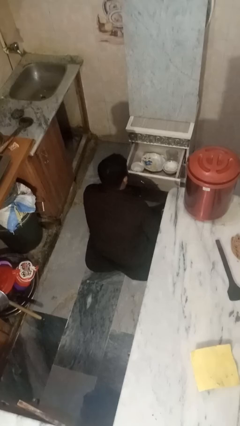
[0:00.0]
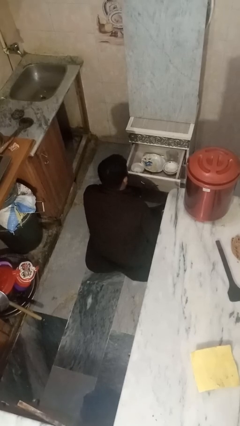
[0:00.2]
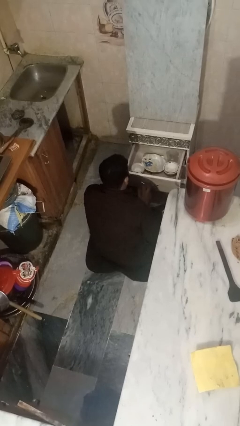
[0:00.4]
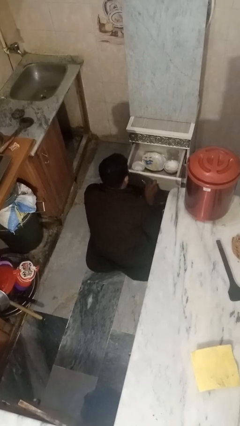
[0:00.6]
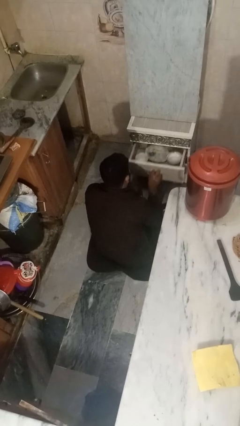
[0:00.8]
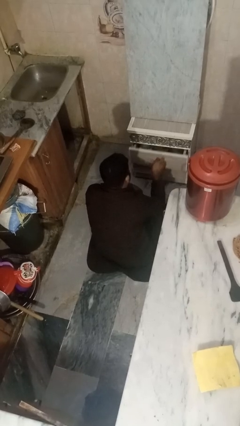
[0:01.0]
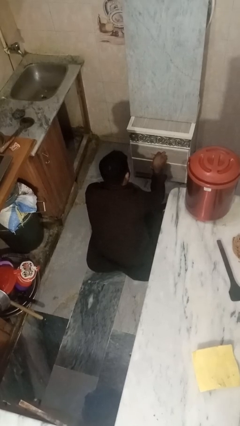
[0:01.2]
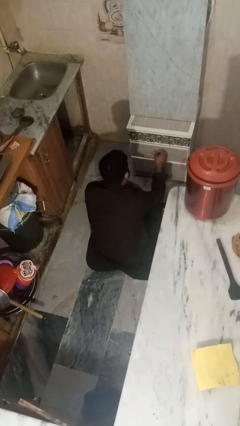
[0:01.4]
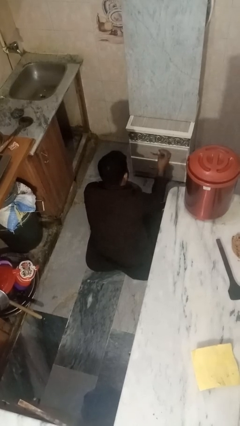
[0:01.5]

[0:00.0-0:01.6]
person closes kitchen drawer

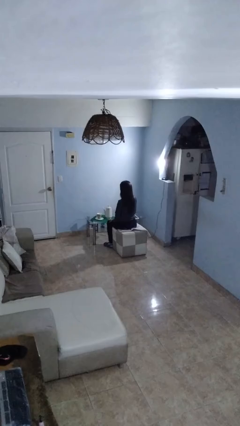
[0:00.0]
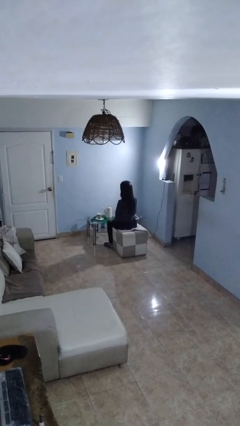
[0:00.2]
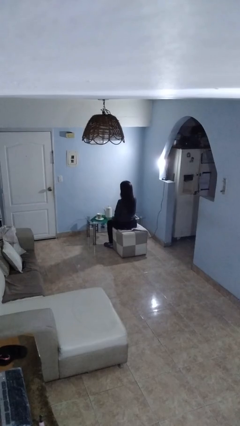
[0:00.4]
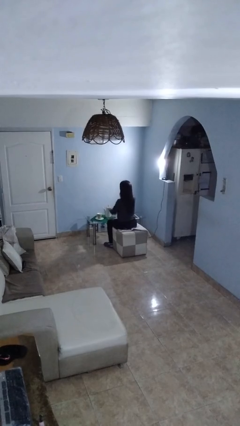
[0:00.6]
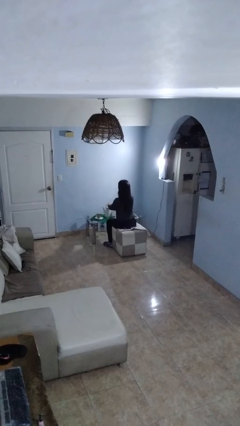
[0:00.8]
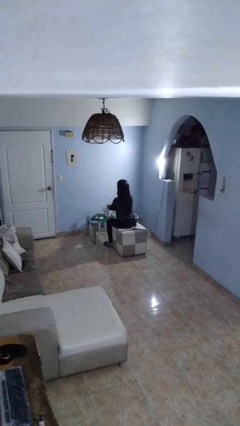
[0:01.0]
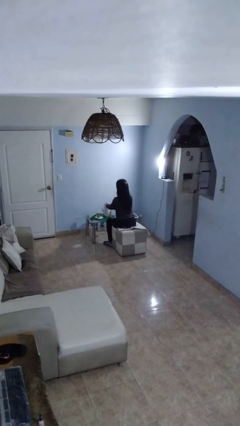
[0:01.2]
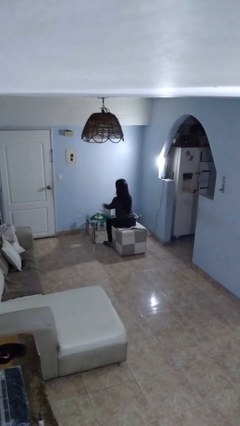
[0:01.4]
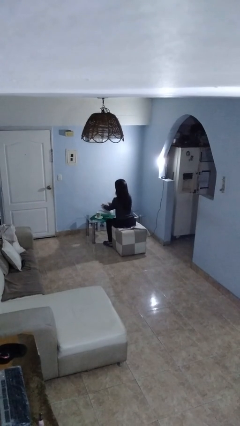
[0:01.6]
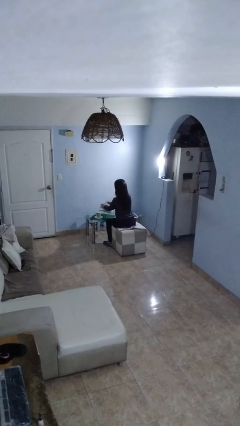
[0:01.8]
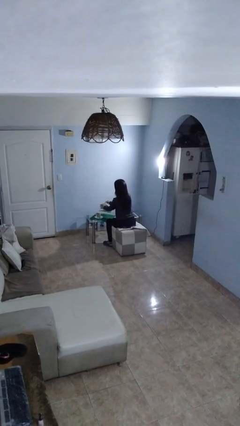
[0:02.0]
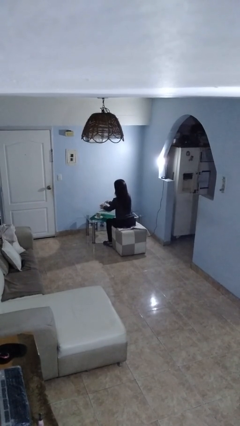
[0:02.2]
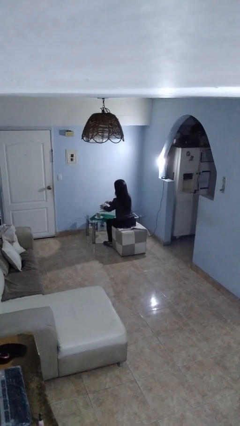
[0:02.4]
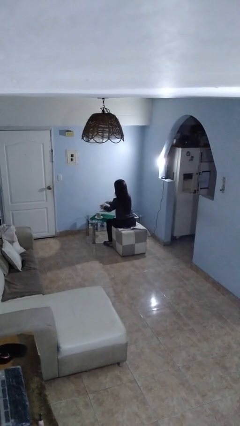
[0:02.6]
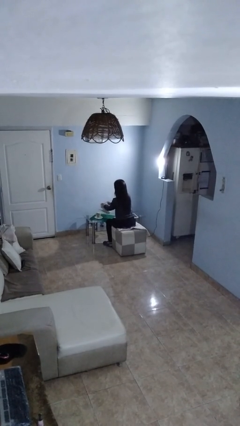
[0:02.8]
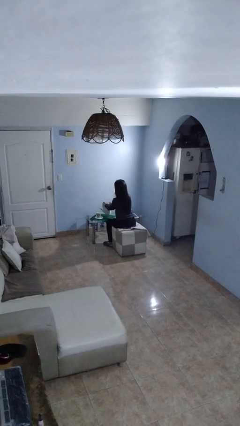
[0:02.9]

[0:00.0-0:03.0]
person pours coffee into mug

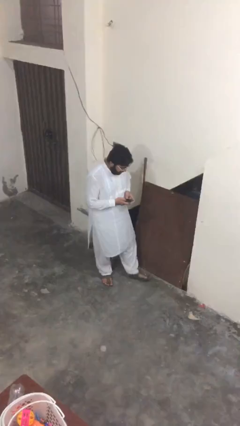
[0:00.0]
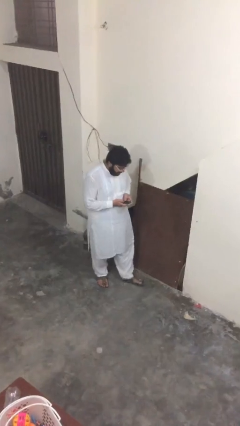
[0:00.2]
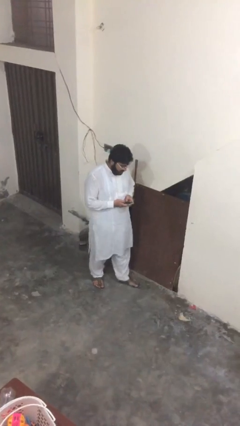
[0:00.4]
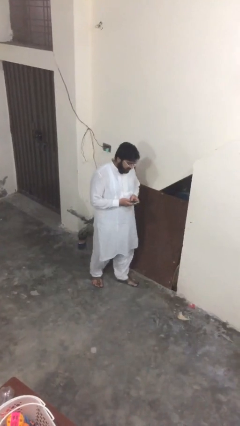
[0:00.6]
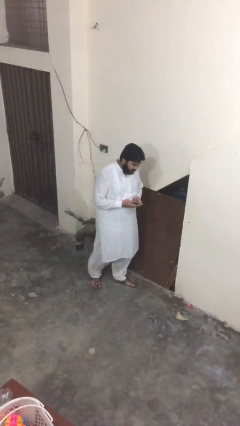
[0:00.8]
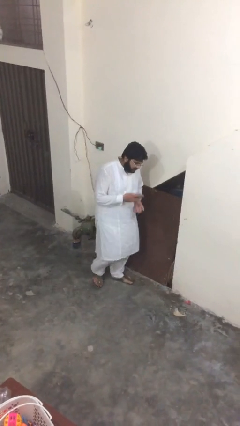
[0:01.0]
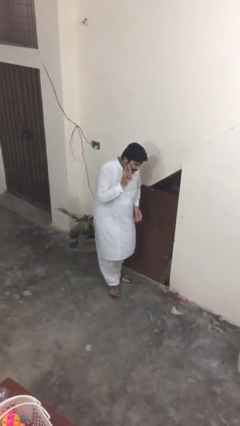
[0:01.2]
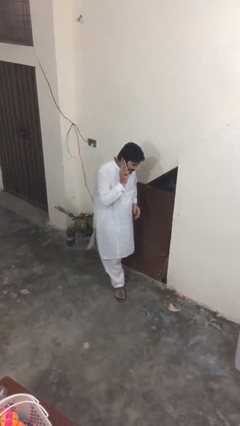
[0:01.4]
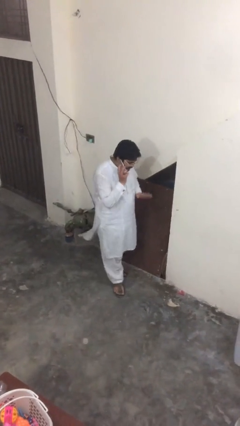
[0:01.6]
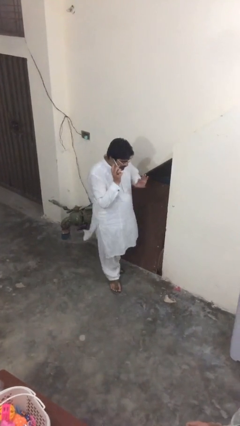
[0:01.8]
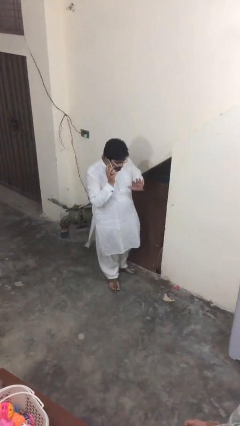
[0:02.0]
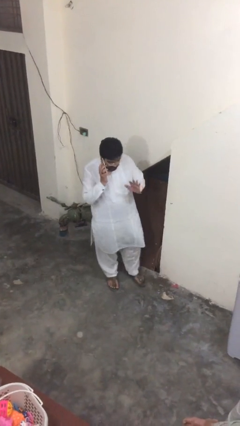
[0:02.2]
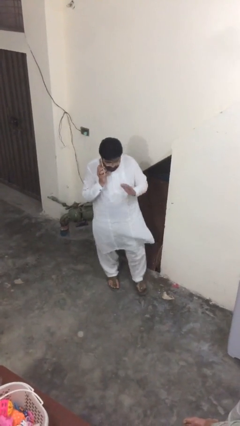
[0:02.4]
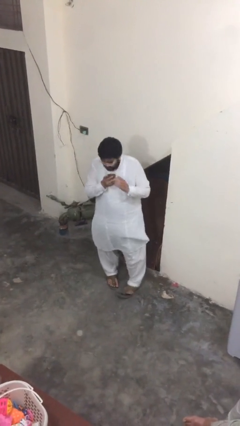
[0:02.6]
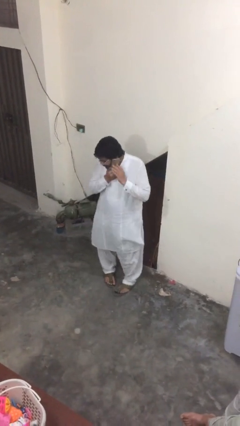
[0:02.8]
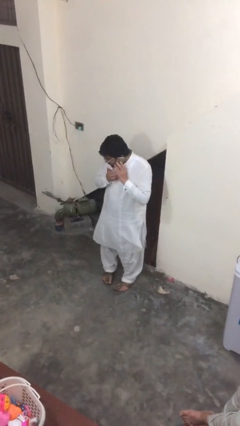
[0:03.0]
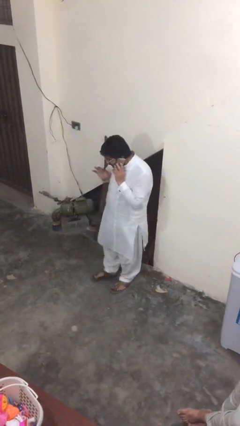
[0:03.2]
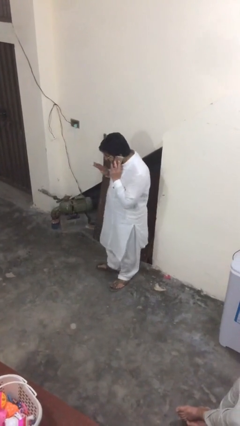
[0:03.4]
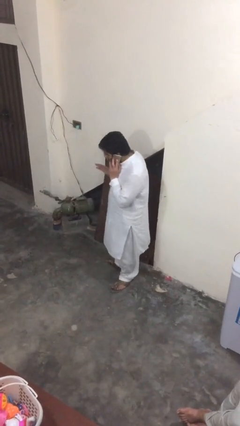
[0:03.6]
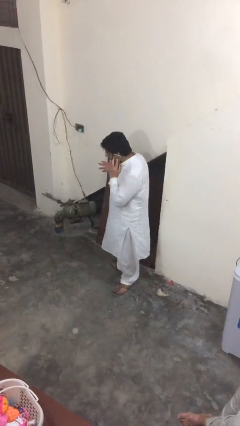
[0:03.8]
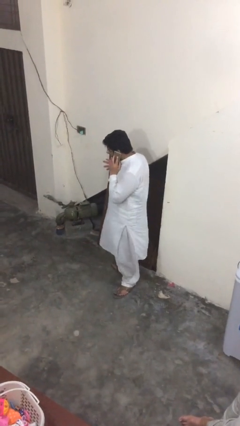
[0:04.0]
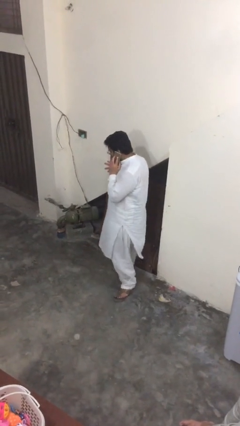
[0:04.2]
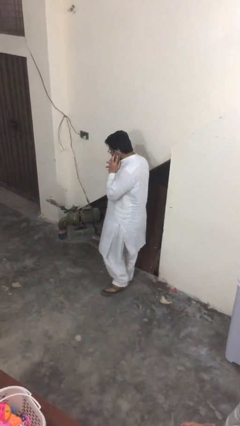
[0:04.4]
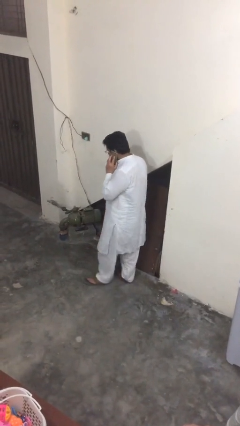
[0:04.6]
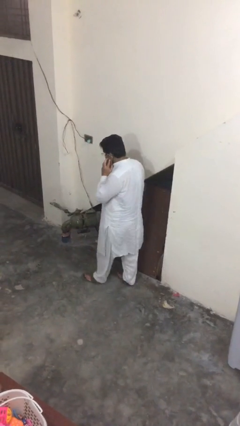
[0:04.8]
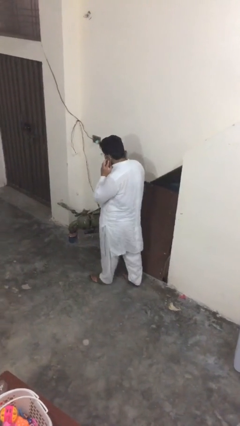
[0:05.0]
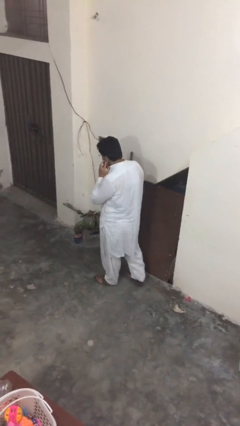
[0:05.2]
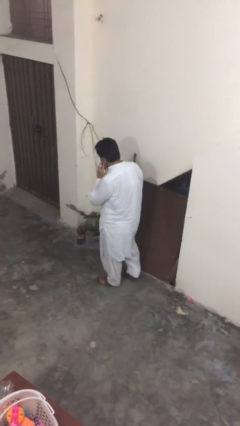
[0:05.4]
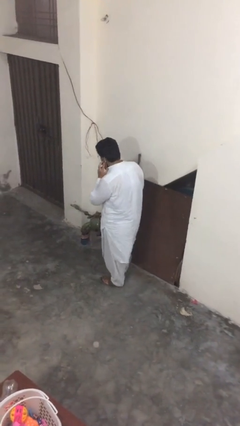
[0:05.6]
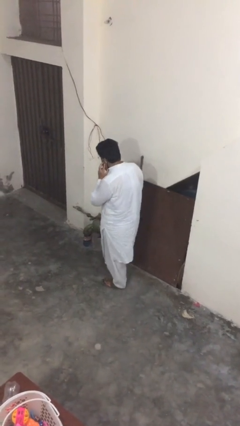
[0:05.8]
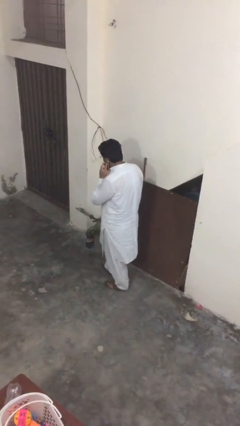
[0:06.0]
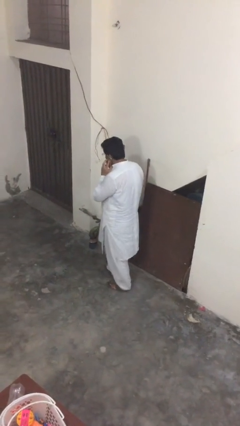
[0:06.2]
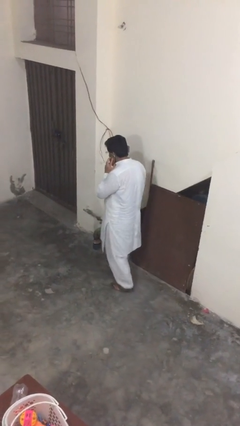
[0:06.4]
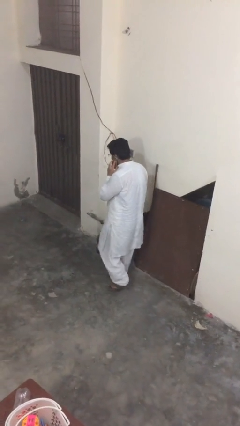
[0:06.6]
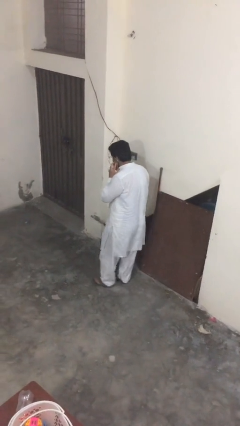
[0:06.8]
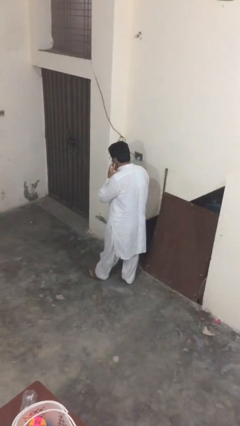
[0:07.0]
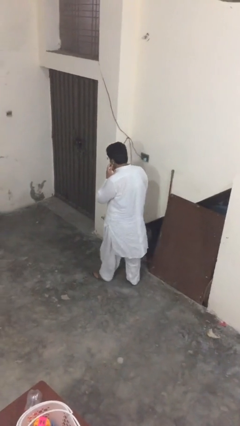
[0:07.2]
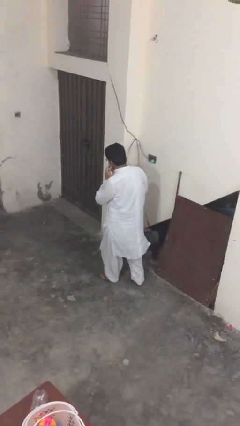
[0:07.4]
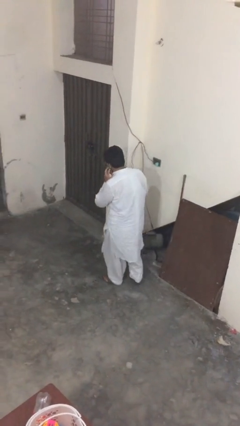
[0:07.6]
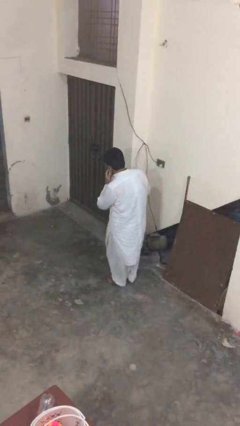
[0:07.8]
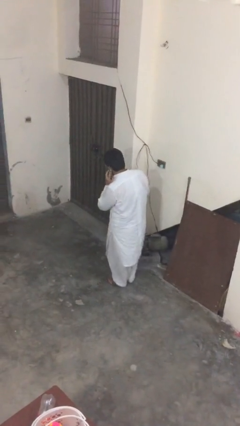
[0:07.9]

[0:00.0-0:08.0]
person talks on phone

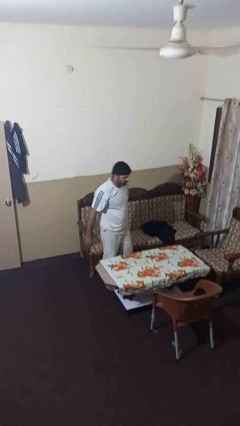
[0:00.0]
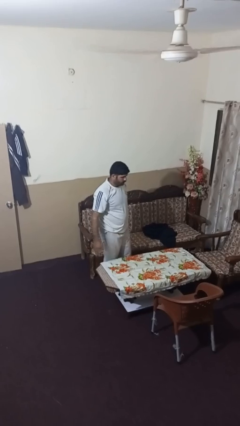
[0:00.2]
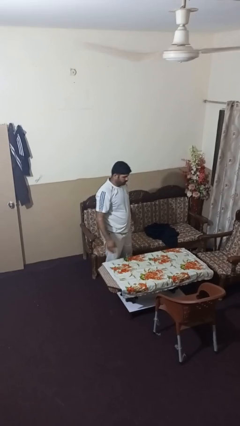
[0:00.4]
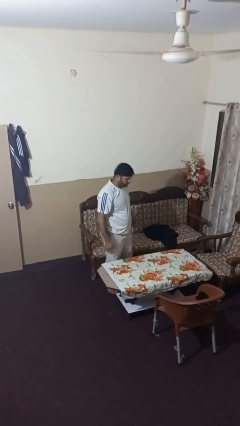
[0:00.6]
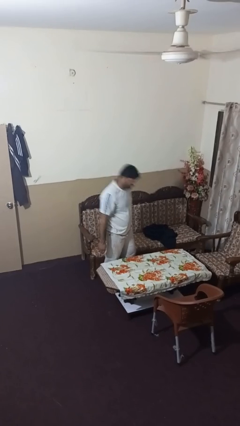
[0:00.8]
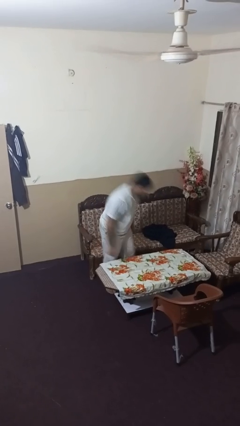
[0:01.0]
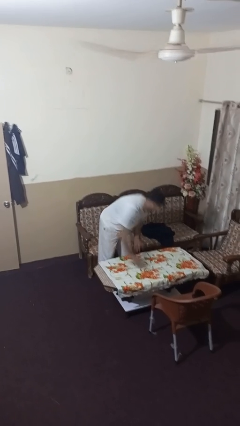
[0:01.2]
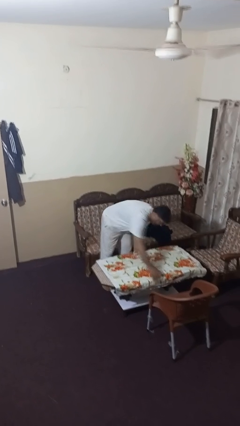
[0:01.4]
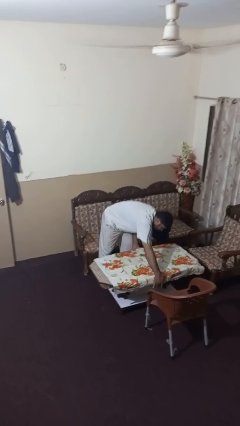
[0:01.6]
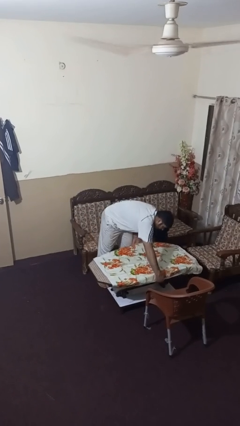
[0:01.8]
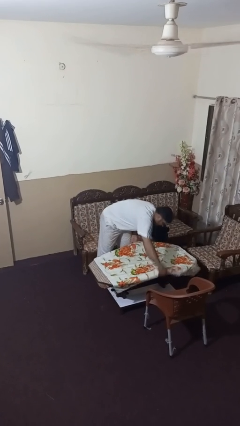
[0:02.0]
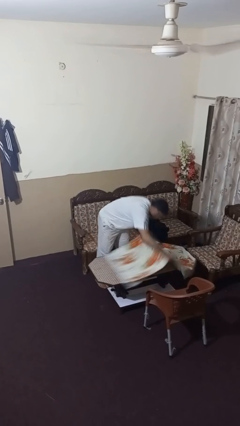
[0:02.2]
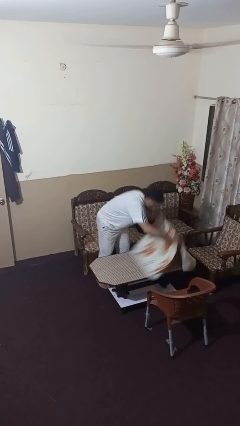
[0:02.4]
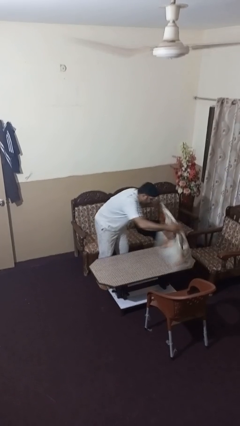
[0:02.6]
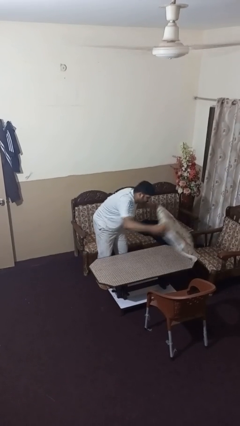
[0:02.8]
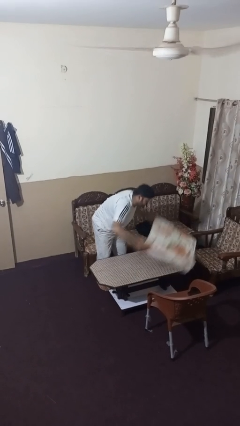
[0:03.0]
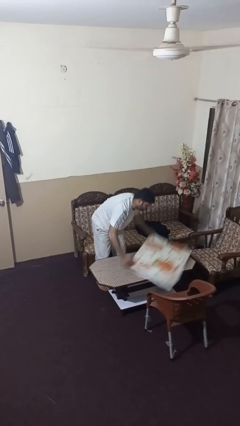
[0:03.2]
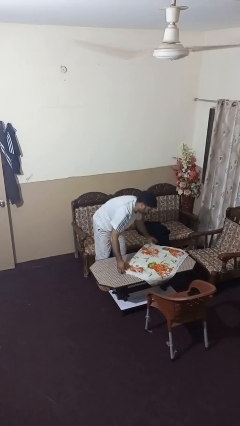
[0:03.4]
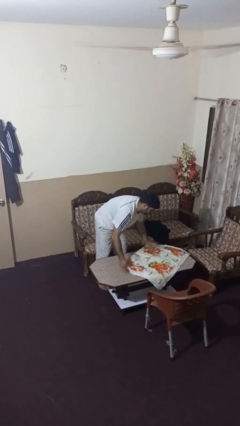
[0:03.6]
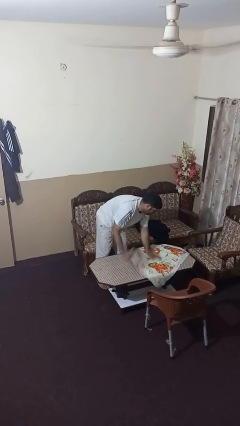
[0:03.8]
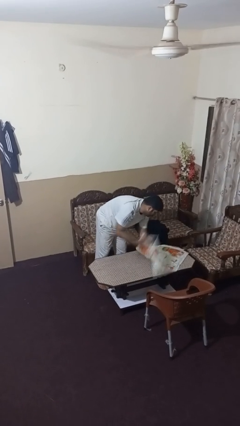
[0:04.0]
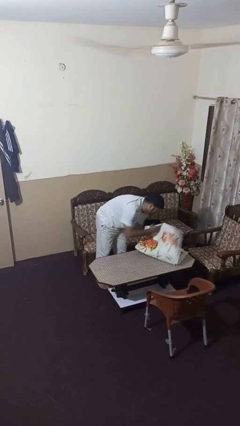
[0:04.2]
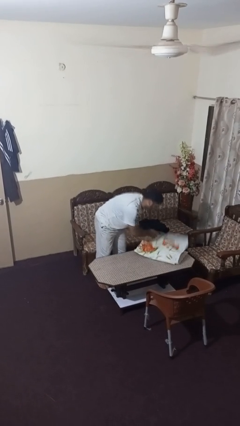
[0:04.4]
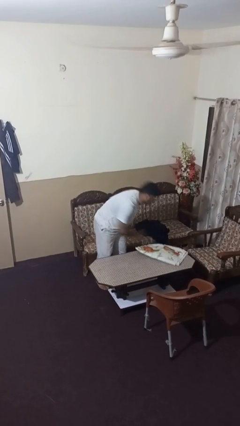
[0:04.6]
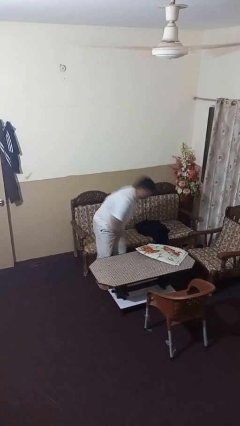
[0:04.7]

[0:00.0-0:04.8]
person folds tablecloth

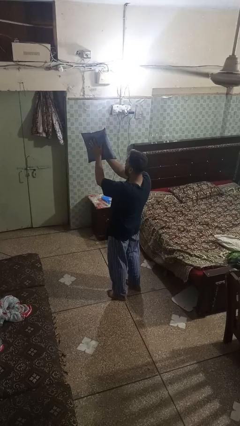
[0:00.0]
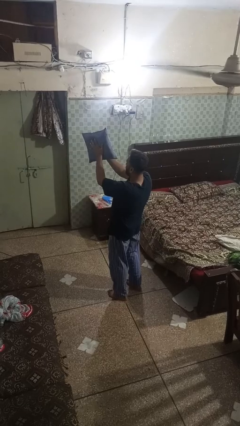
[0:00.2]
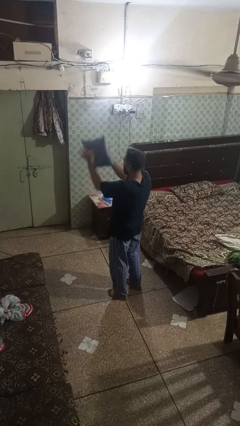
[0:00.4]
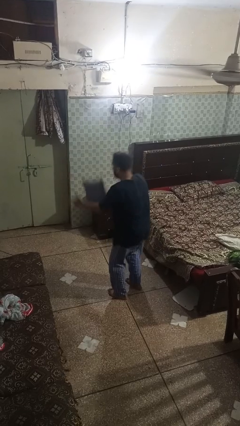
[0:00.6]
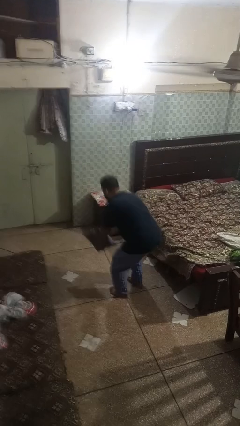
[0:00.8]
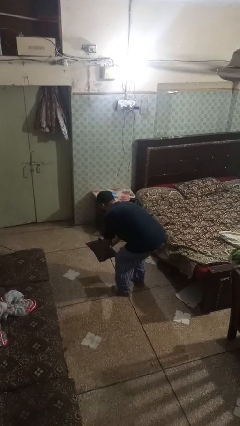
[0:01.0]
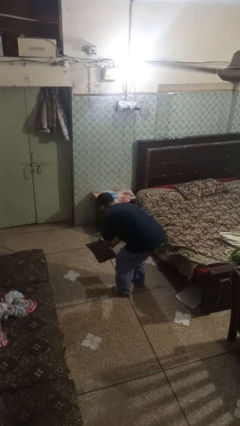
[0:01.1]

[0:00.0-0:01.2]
person drops object
